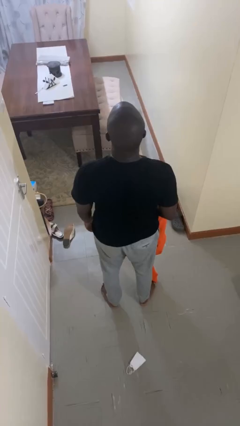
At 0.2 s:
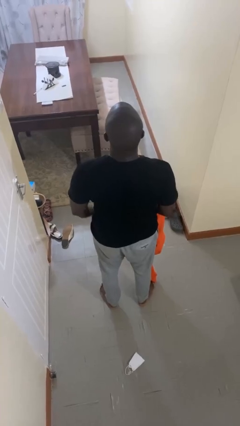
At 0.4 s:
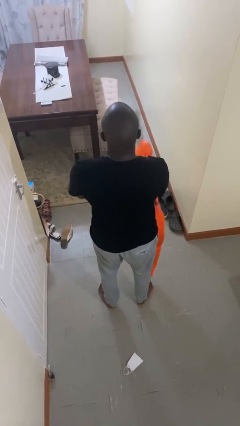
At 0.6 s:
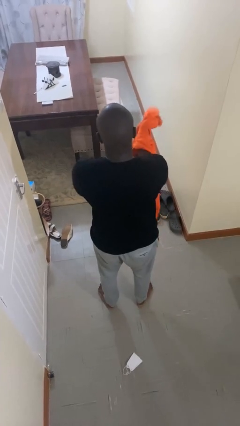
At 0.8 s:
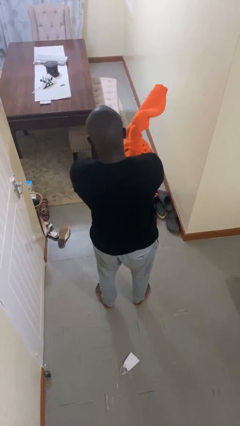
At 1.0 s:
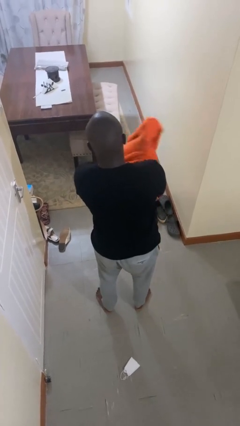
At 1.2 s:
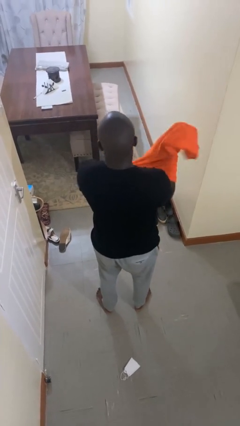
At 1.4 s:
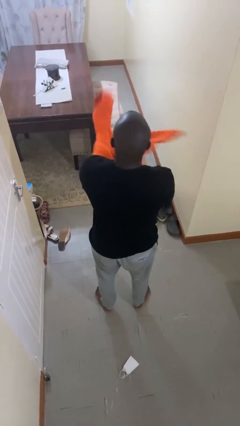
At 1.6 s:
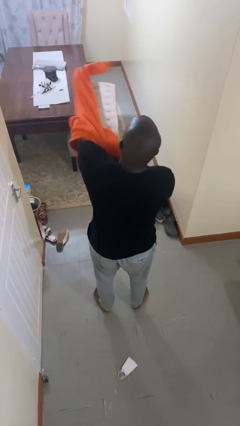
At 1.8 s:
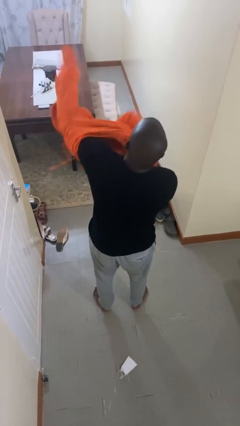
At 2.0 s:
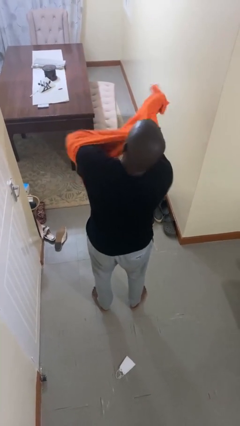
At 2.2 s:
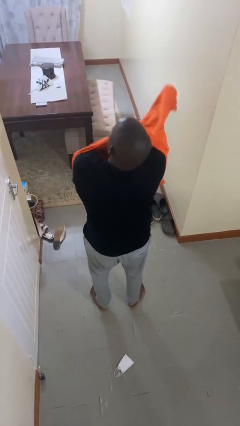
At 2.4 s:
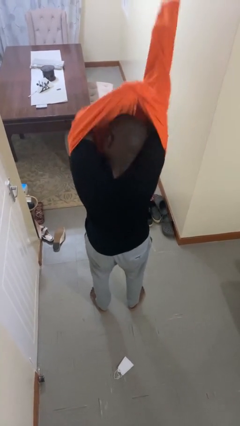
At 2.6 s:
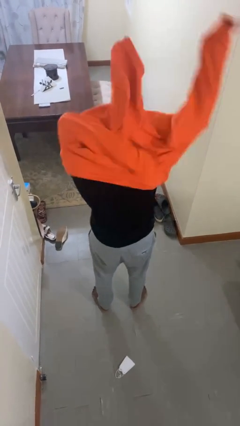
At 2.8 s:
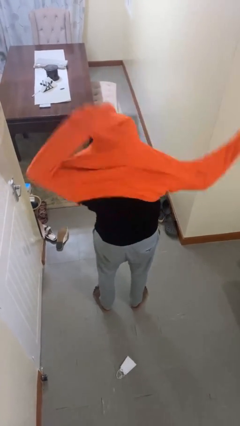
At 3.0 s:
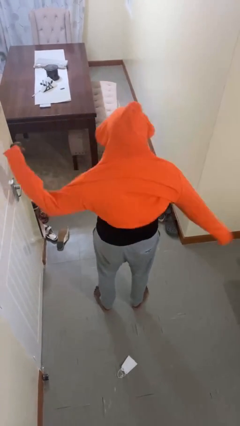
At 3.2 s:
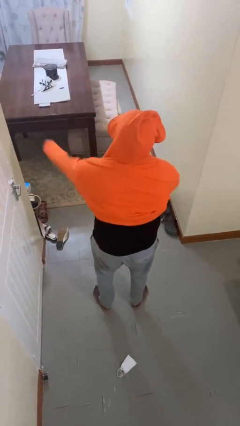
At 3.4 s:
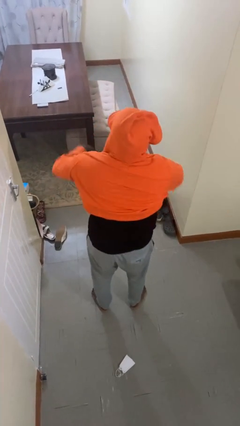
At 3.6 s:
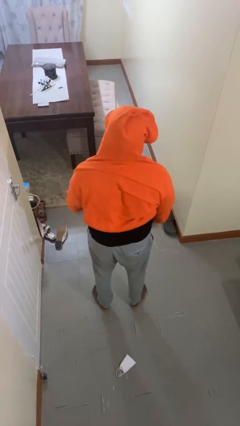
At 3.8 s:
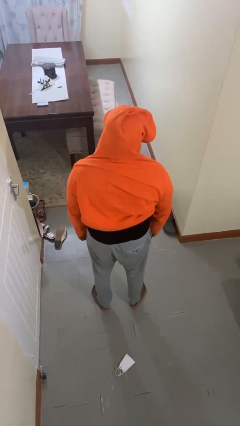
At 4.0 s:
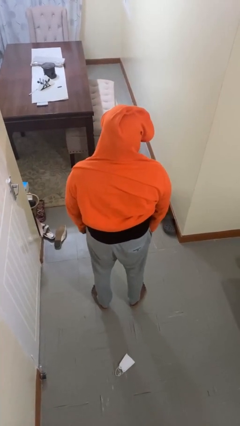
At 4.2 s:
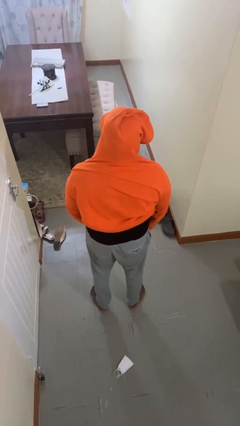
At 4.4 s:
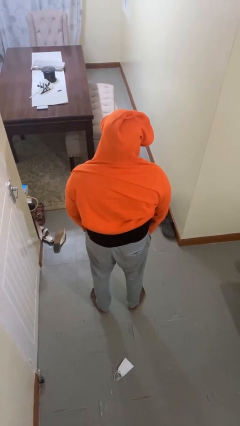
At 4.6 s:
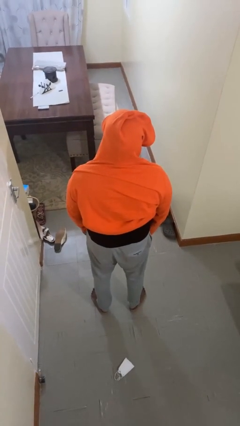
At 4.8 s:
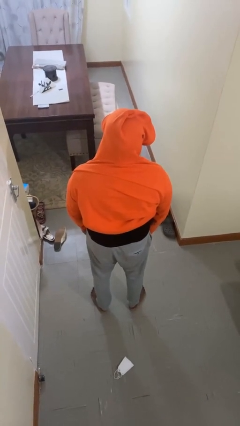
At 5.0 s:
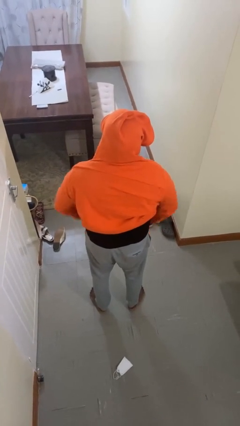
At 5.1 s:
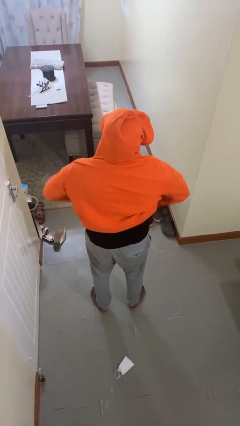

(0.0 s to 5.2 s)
person puts on hoodie

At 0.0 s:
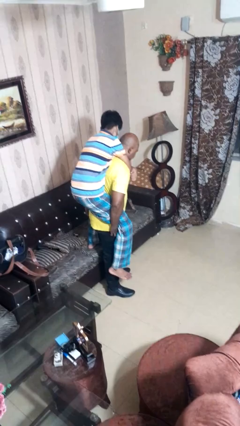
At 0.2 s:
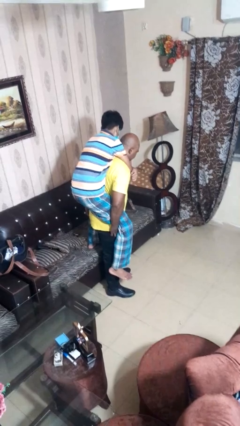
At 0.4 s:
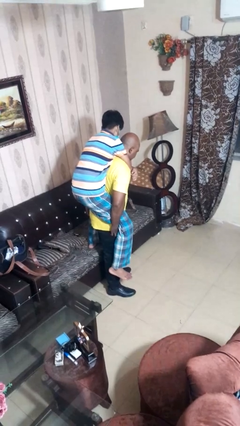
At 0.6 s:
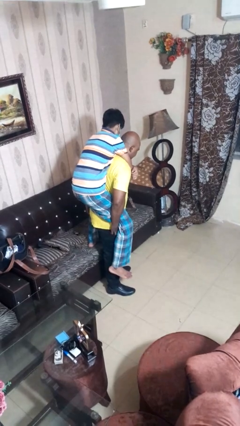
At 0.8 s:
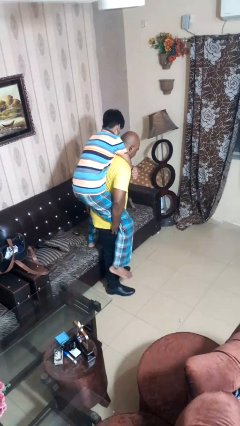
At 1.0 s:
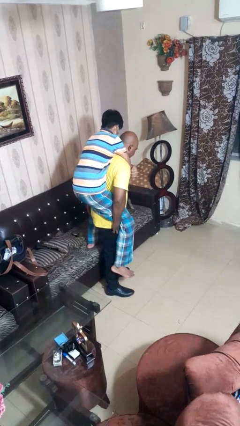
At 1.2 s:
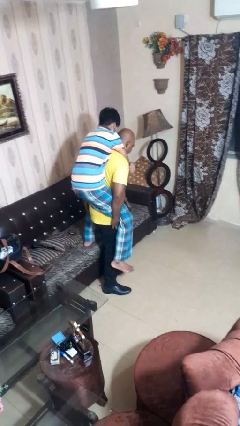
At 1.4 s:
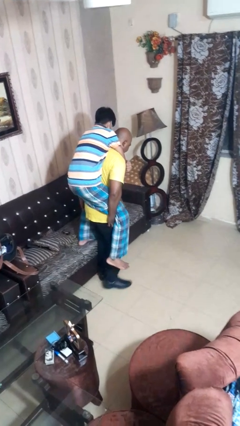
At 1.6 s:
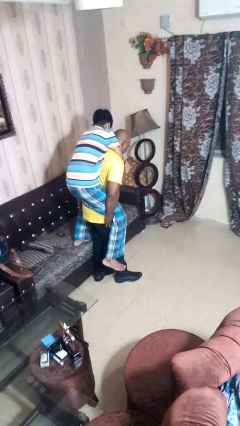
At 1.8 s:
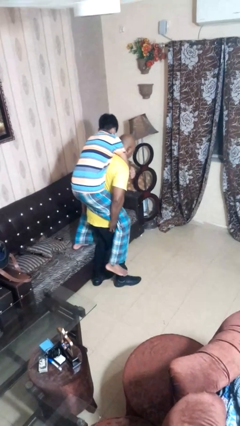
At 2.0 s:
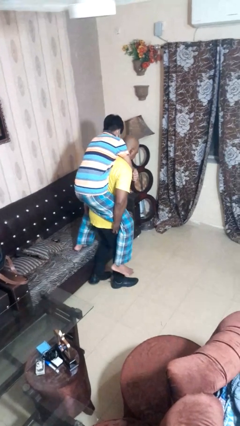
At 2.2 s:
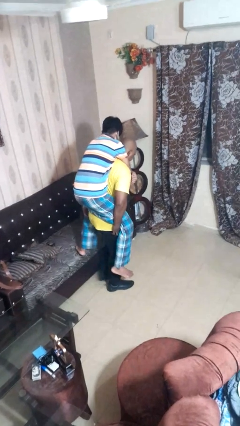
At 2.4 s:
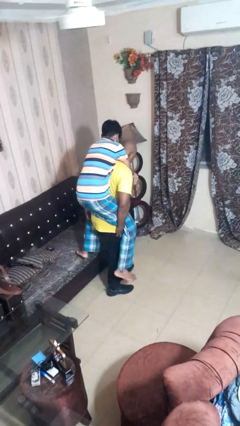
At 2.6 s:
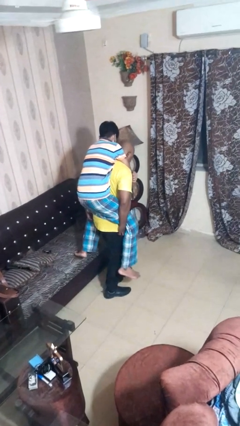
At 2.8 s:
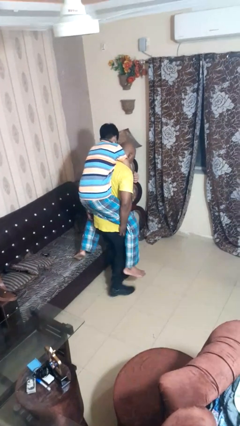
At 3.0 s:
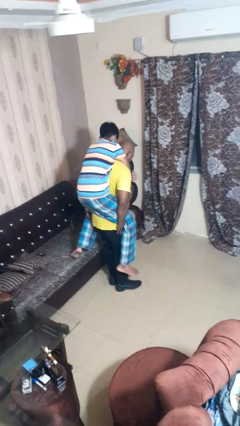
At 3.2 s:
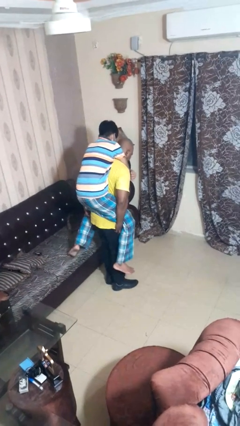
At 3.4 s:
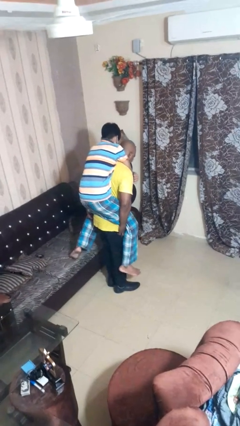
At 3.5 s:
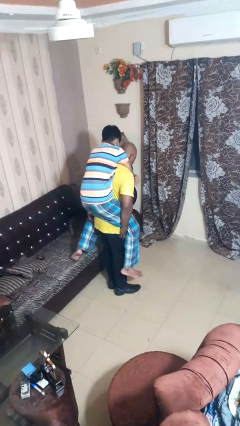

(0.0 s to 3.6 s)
person carries person on back

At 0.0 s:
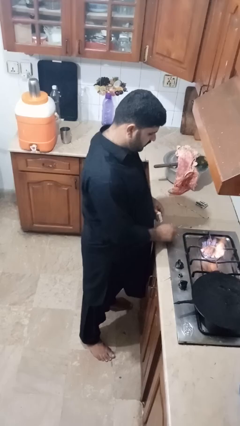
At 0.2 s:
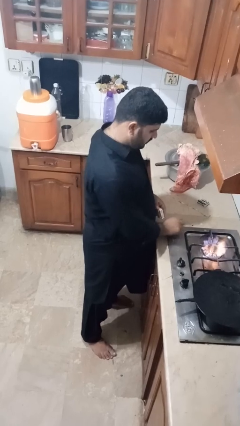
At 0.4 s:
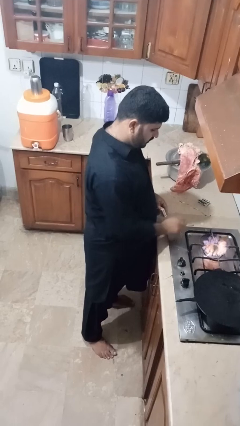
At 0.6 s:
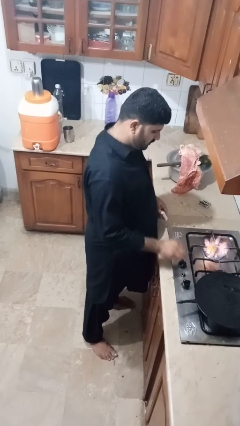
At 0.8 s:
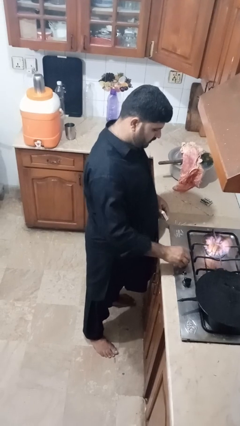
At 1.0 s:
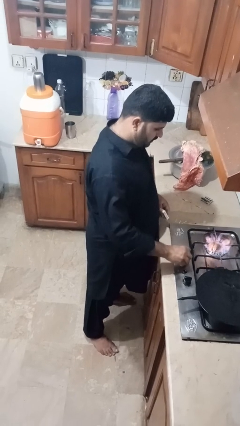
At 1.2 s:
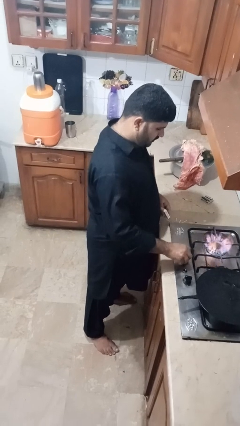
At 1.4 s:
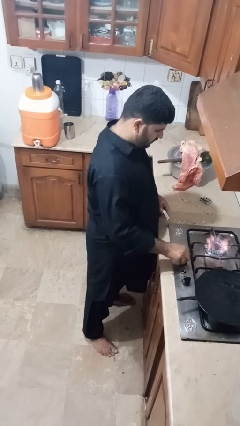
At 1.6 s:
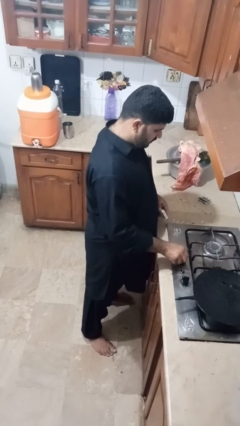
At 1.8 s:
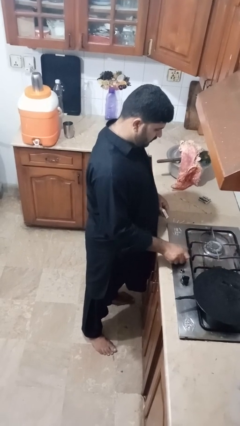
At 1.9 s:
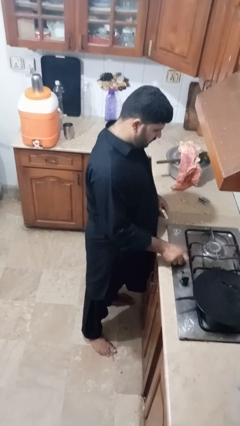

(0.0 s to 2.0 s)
person turns off stovetop

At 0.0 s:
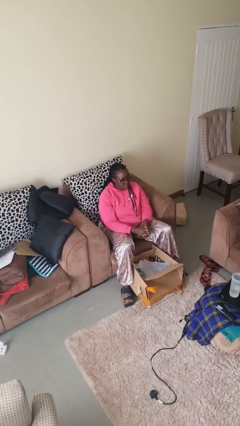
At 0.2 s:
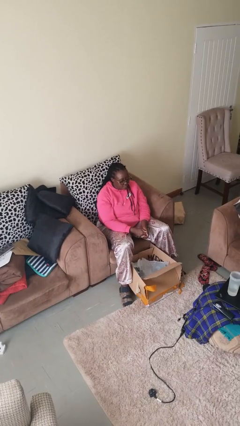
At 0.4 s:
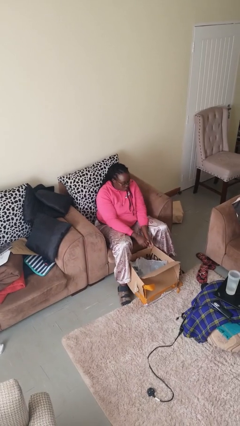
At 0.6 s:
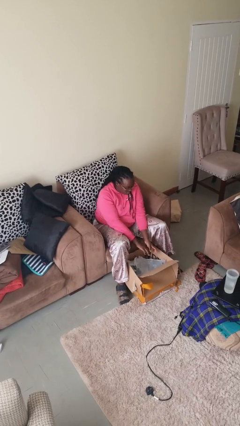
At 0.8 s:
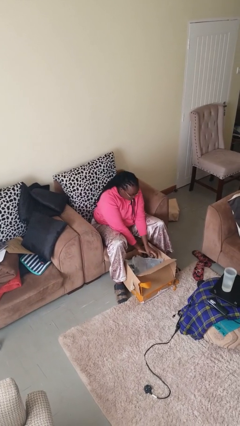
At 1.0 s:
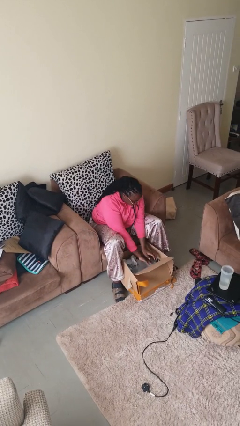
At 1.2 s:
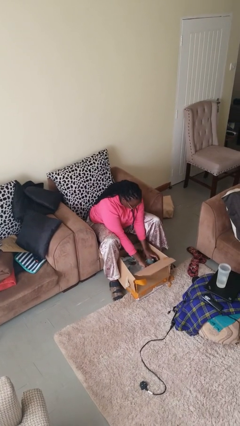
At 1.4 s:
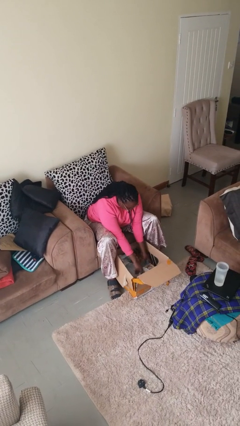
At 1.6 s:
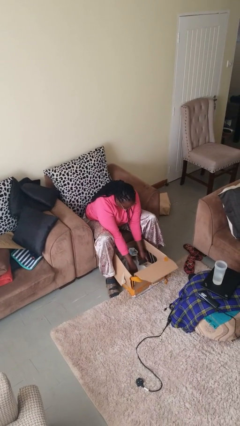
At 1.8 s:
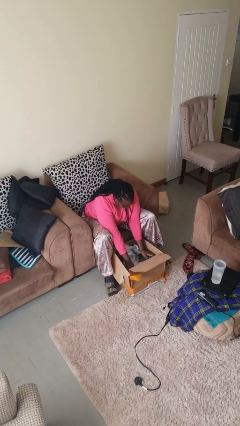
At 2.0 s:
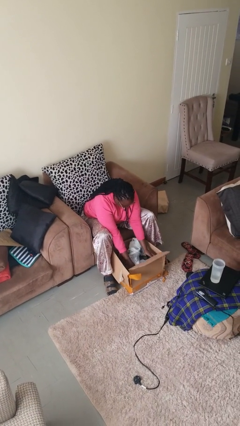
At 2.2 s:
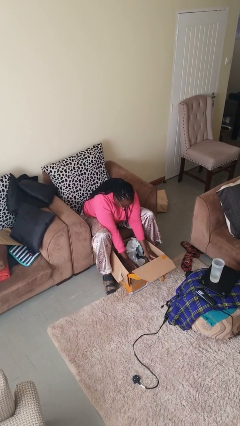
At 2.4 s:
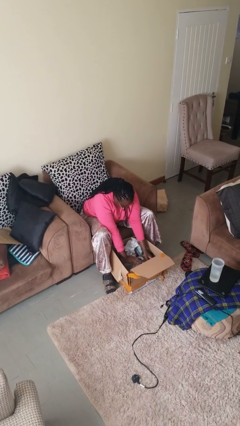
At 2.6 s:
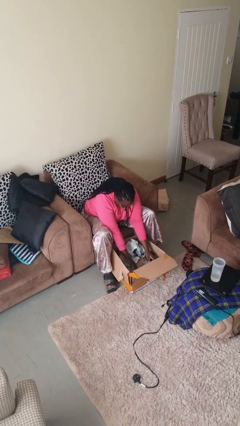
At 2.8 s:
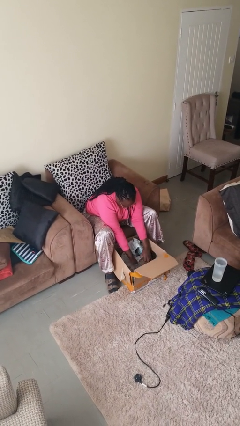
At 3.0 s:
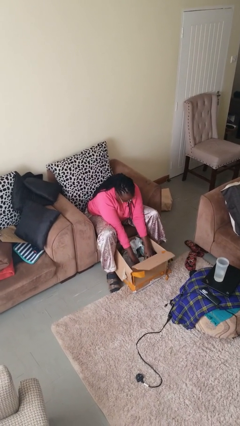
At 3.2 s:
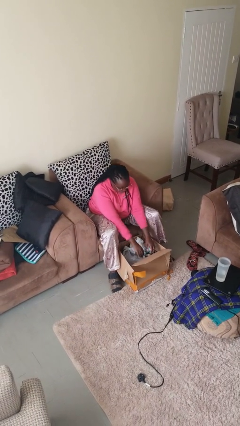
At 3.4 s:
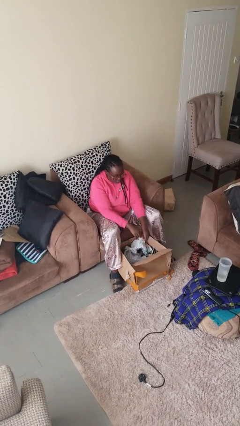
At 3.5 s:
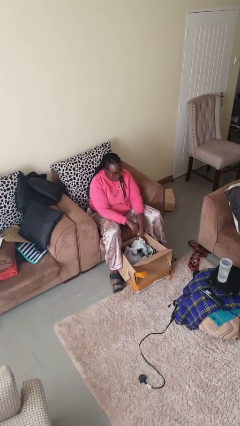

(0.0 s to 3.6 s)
person searches in box

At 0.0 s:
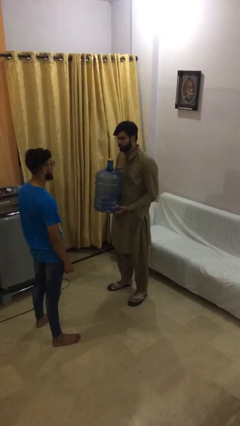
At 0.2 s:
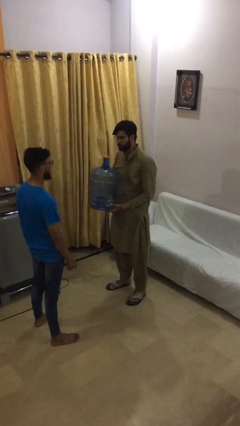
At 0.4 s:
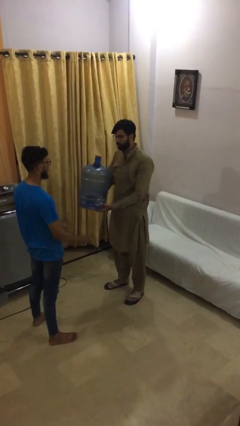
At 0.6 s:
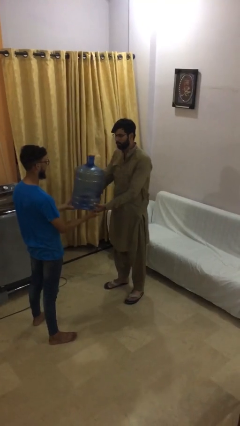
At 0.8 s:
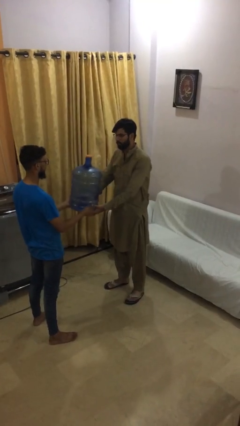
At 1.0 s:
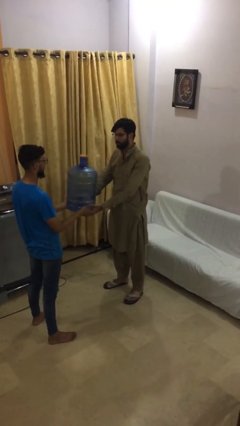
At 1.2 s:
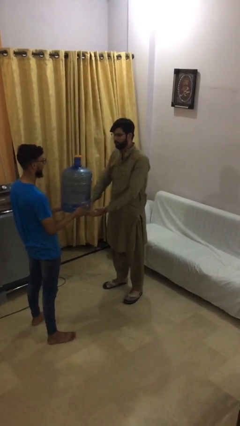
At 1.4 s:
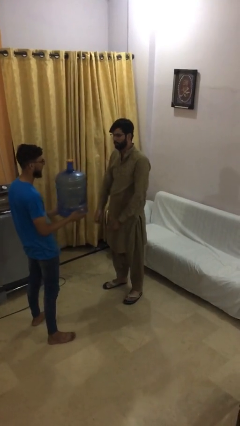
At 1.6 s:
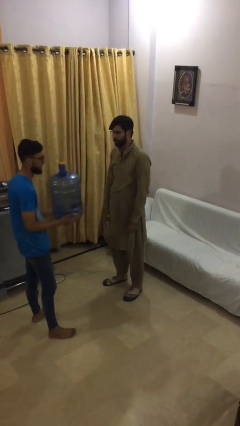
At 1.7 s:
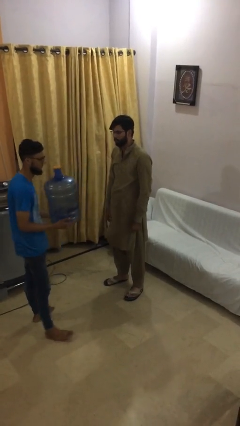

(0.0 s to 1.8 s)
person transfers object to person

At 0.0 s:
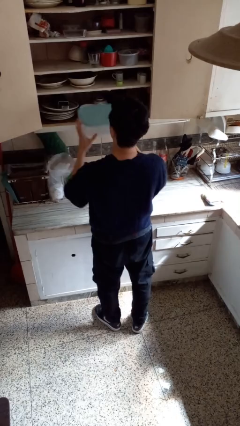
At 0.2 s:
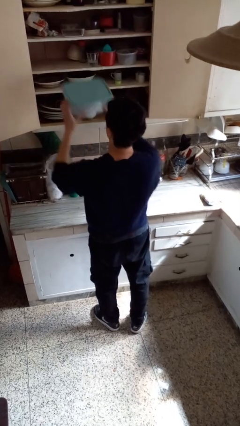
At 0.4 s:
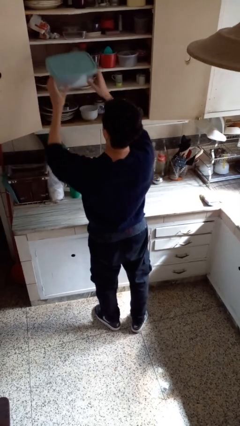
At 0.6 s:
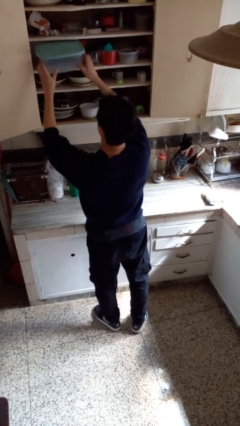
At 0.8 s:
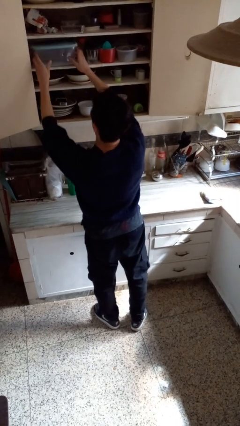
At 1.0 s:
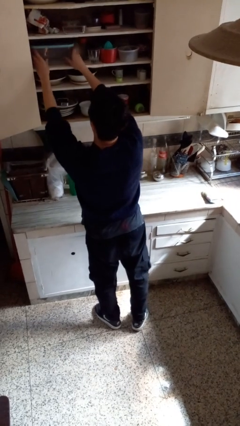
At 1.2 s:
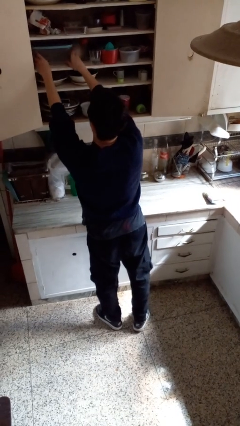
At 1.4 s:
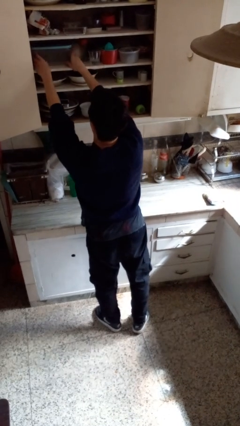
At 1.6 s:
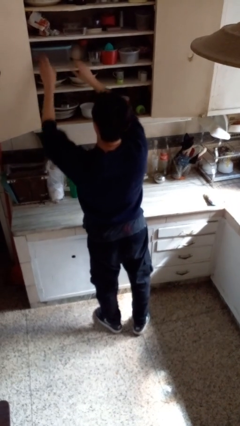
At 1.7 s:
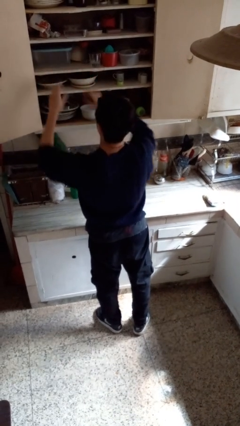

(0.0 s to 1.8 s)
person puts down object into cabinet
